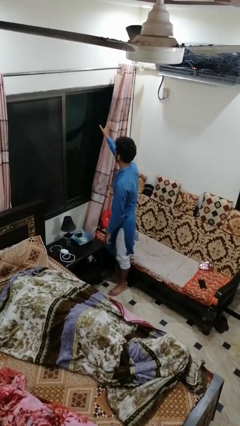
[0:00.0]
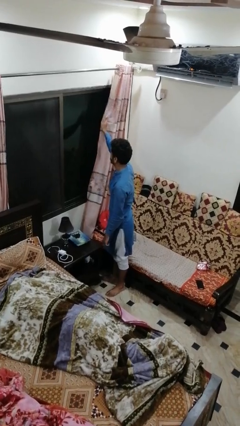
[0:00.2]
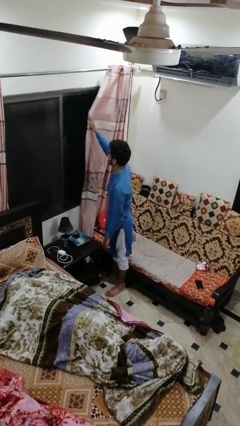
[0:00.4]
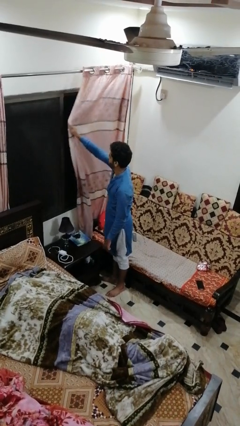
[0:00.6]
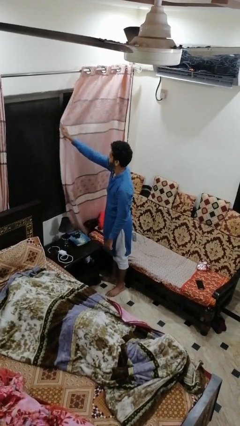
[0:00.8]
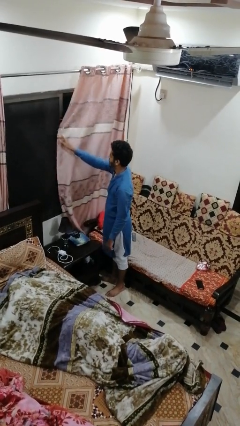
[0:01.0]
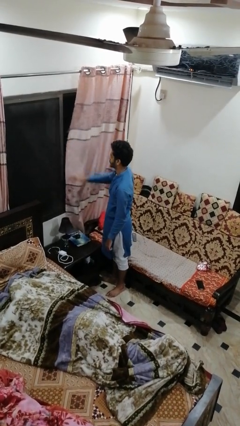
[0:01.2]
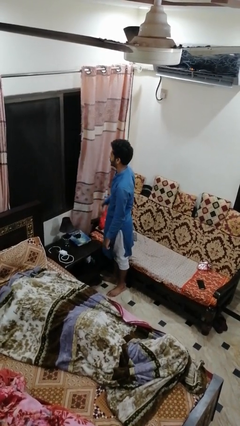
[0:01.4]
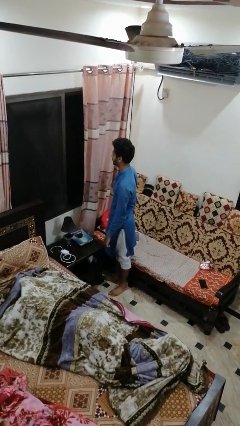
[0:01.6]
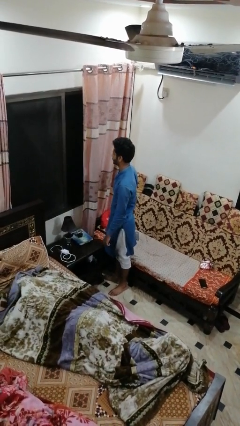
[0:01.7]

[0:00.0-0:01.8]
person closes curtains

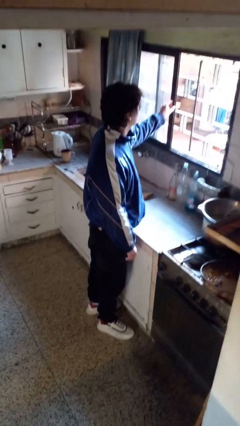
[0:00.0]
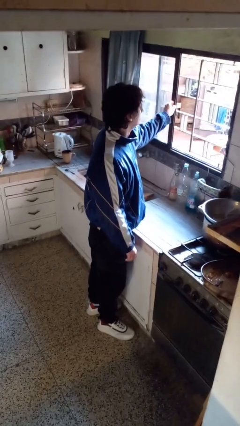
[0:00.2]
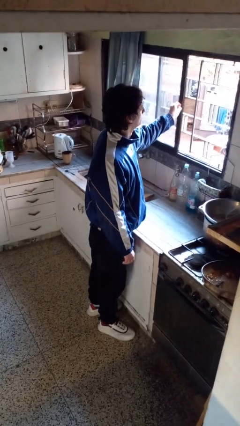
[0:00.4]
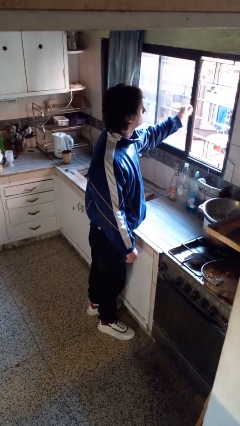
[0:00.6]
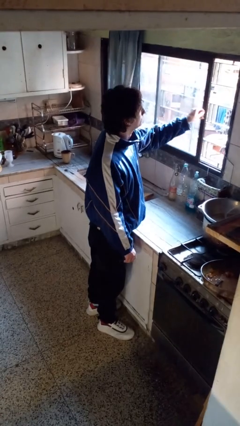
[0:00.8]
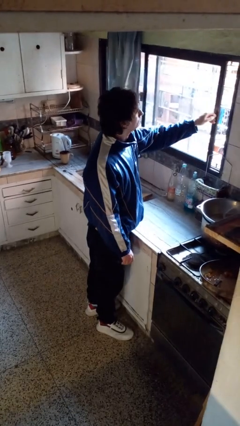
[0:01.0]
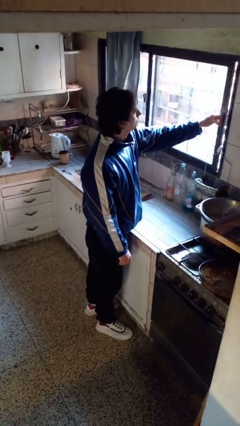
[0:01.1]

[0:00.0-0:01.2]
person closes home window

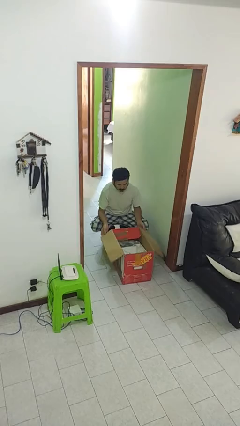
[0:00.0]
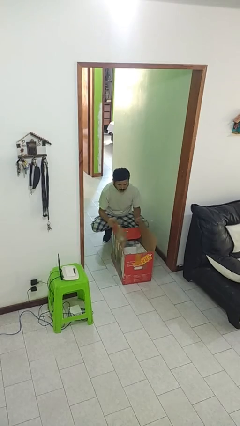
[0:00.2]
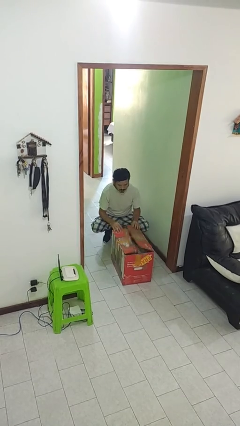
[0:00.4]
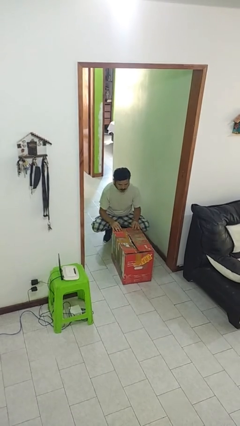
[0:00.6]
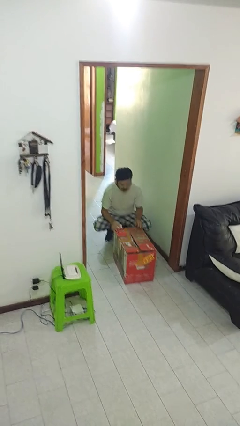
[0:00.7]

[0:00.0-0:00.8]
person closes box

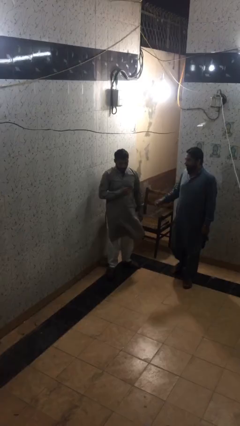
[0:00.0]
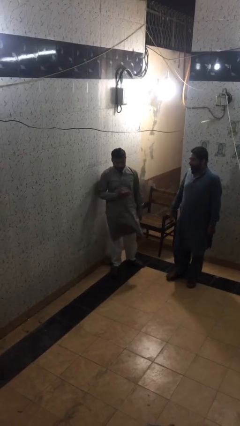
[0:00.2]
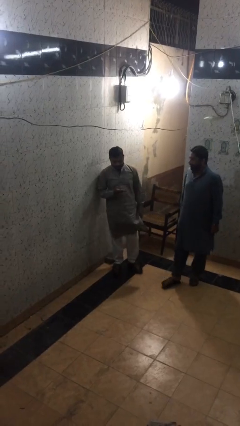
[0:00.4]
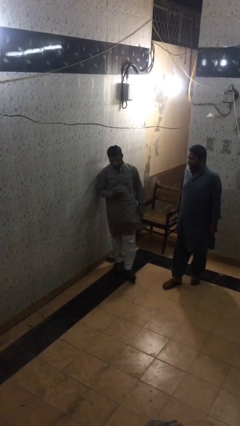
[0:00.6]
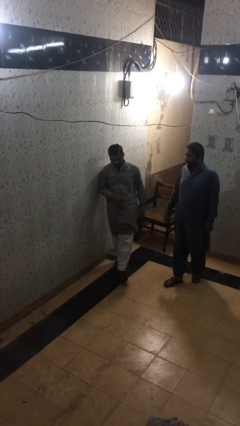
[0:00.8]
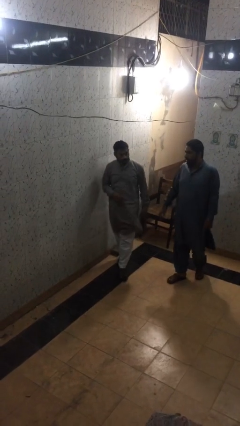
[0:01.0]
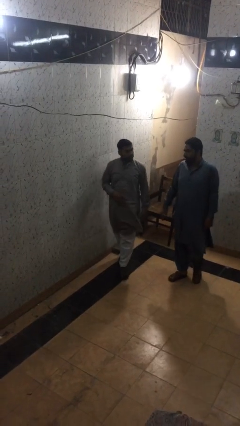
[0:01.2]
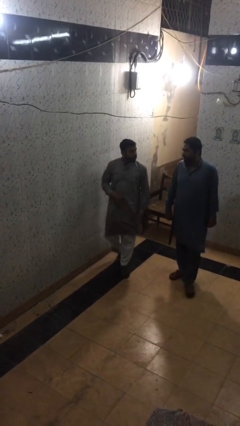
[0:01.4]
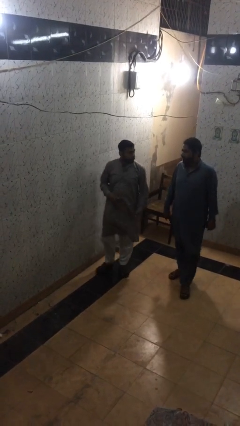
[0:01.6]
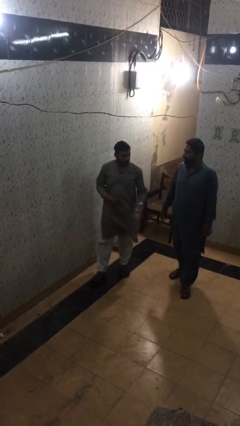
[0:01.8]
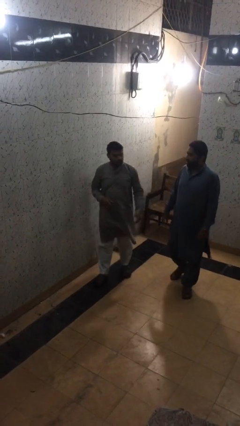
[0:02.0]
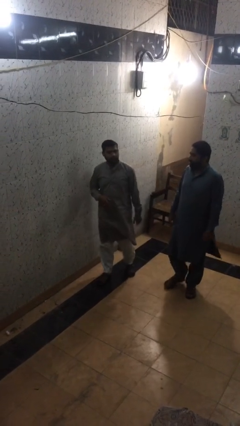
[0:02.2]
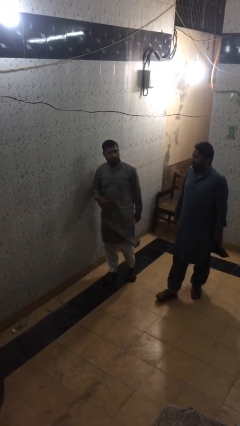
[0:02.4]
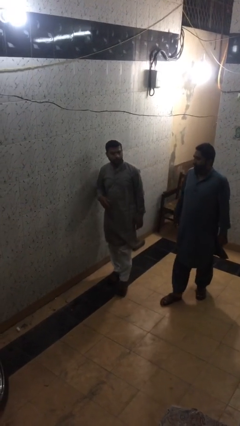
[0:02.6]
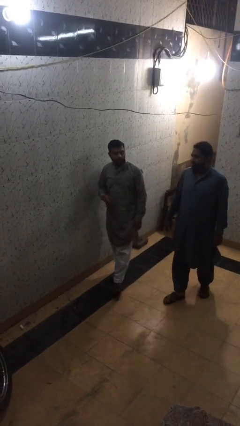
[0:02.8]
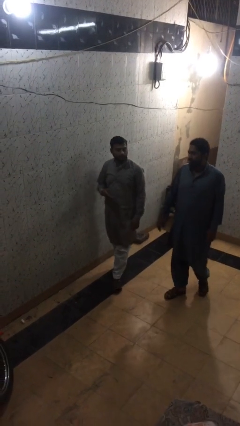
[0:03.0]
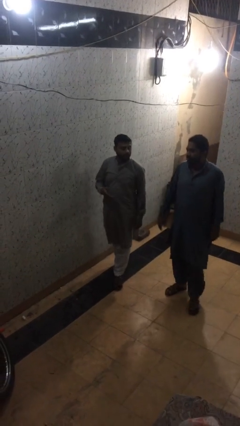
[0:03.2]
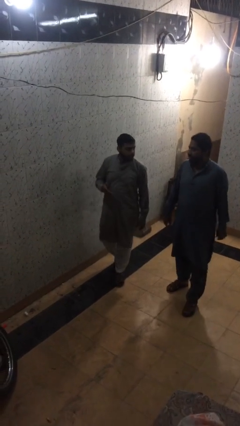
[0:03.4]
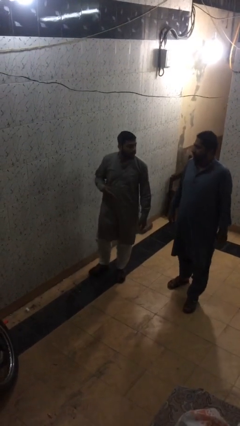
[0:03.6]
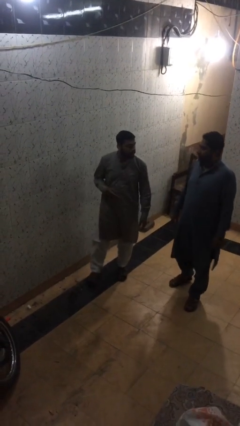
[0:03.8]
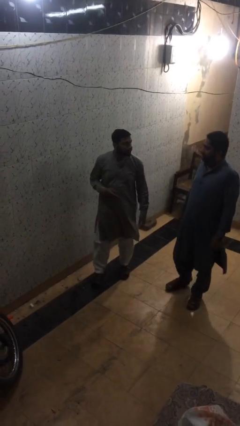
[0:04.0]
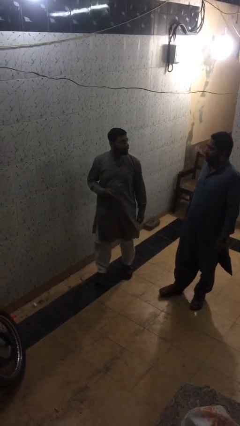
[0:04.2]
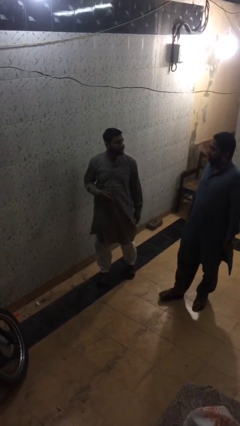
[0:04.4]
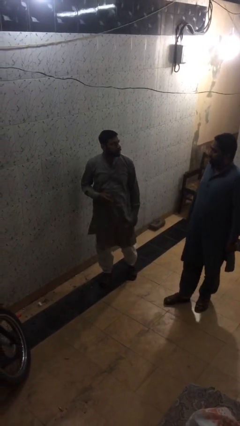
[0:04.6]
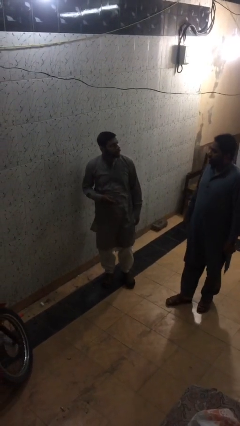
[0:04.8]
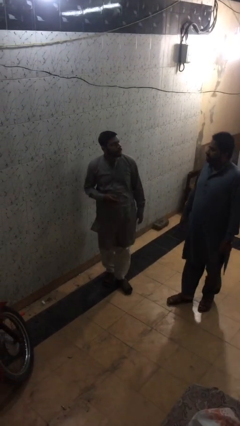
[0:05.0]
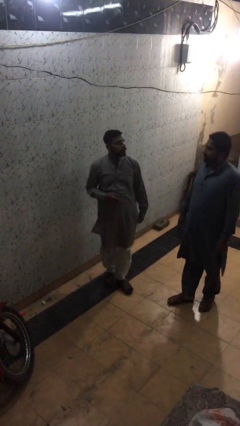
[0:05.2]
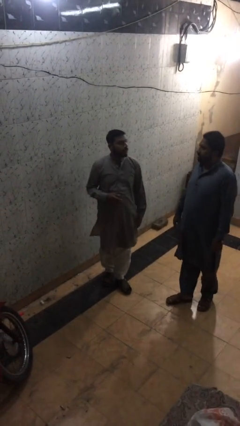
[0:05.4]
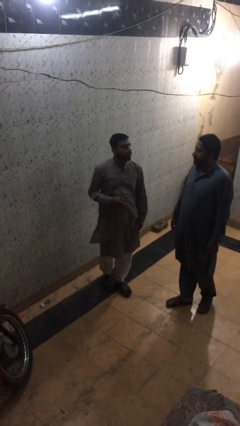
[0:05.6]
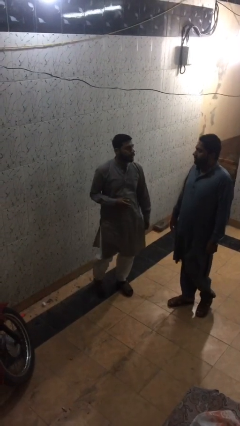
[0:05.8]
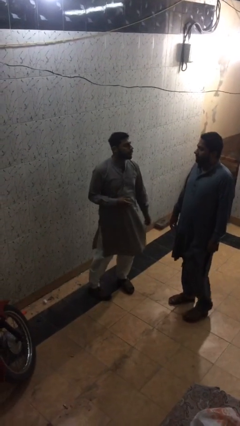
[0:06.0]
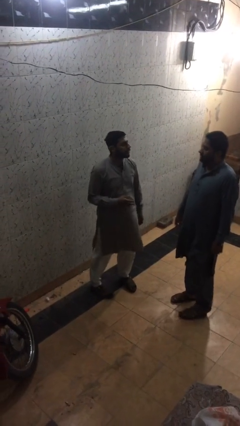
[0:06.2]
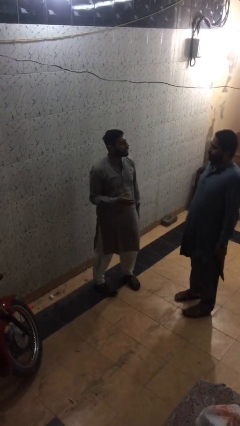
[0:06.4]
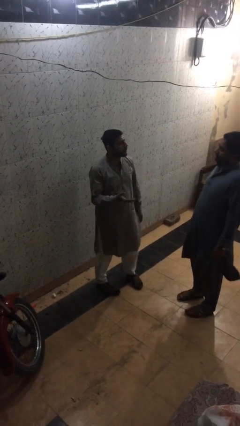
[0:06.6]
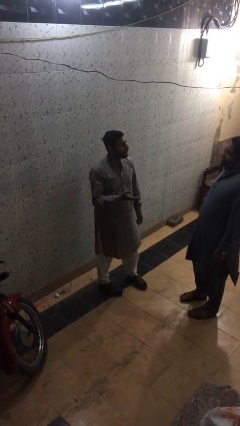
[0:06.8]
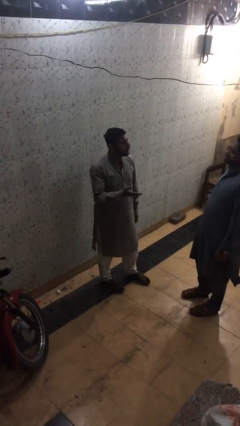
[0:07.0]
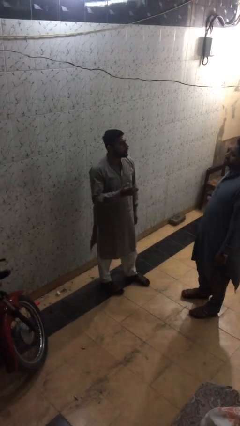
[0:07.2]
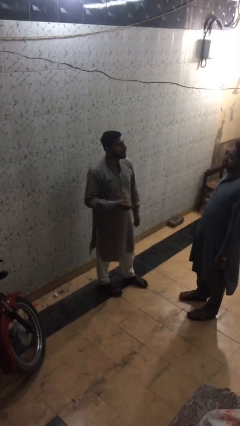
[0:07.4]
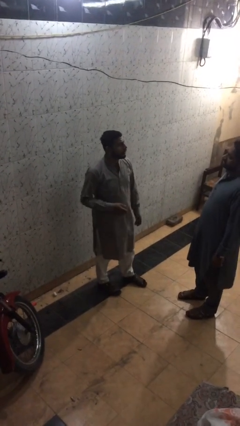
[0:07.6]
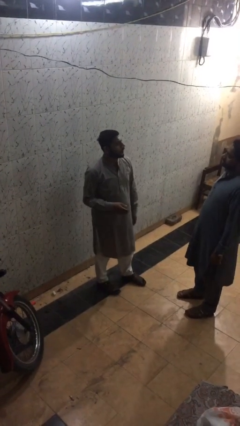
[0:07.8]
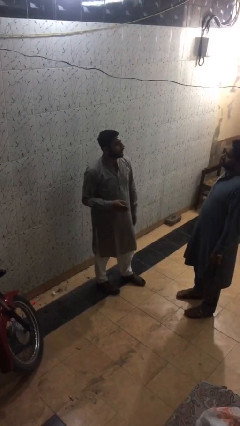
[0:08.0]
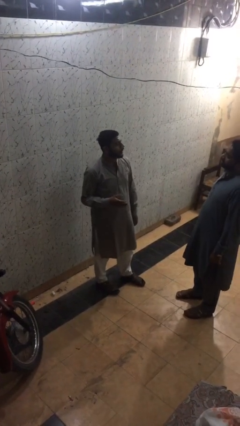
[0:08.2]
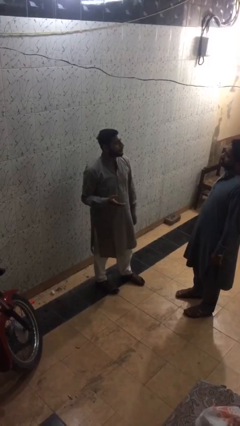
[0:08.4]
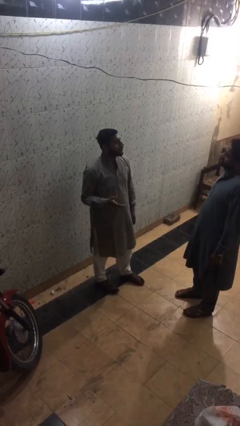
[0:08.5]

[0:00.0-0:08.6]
person talks to person

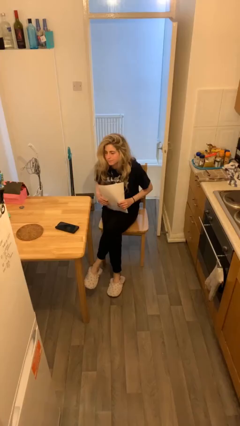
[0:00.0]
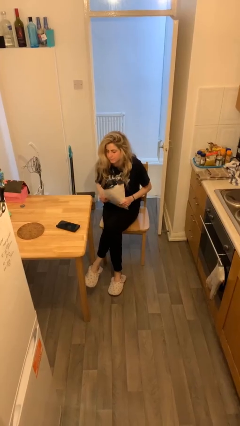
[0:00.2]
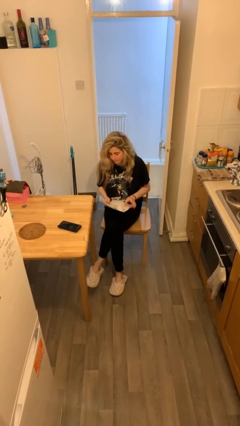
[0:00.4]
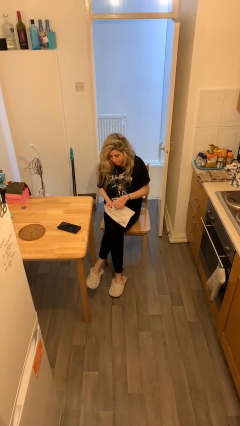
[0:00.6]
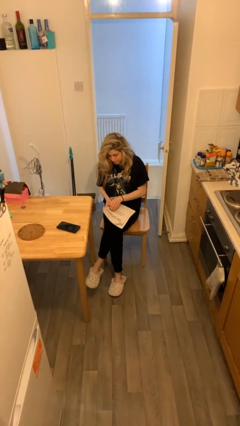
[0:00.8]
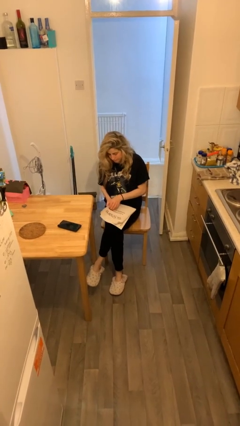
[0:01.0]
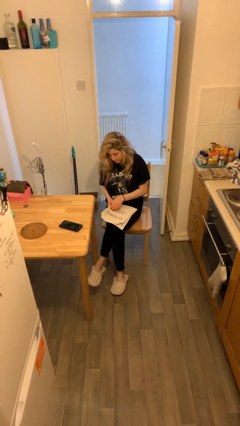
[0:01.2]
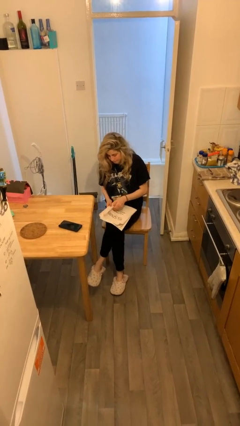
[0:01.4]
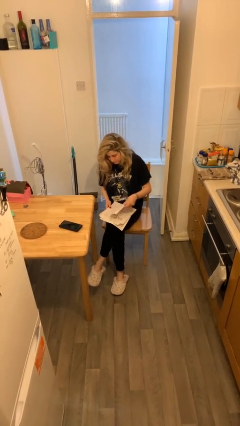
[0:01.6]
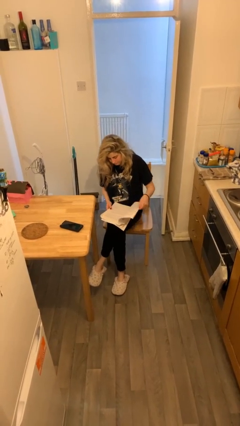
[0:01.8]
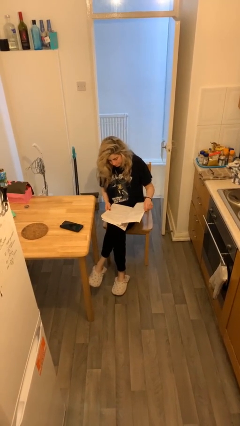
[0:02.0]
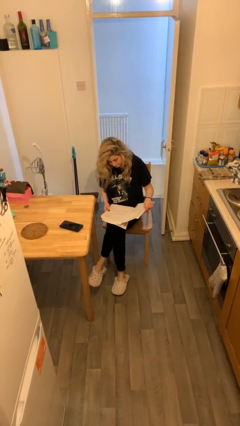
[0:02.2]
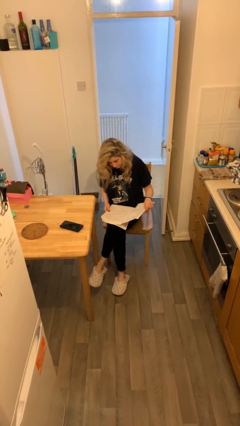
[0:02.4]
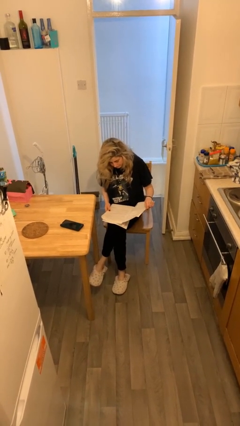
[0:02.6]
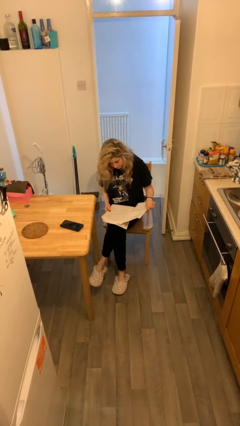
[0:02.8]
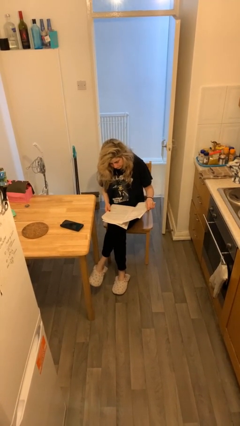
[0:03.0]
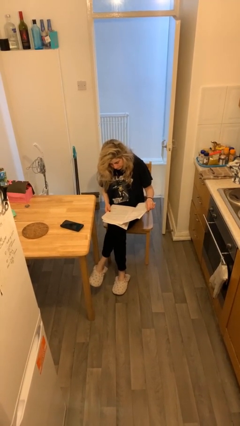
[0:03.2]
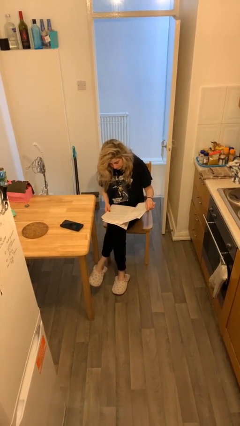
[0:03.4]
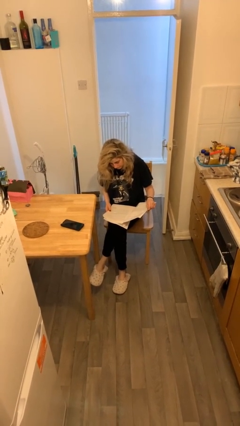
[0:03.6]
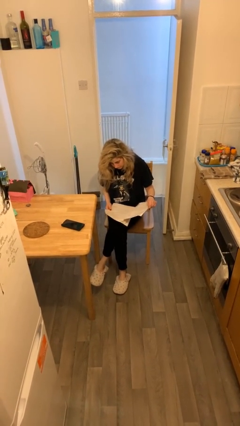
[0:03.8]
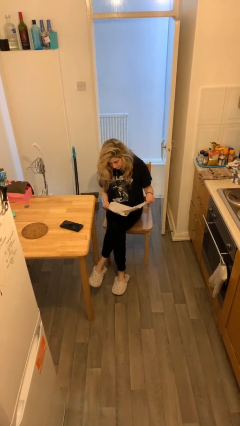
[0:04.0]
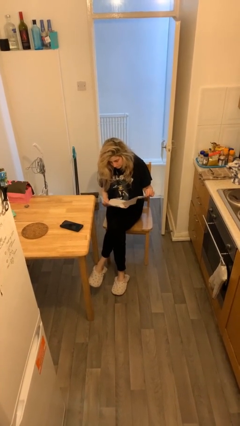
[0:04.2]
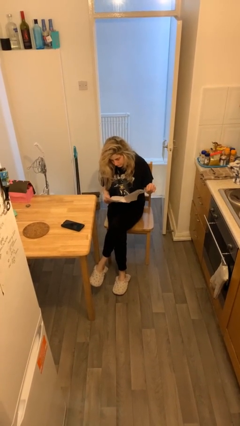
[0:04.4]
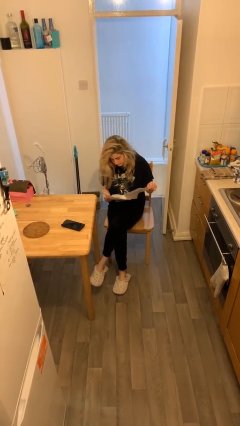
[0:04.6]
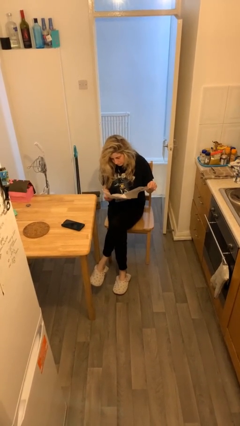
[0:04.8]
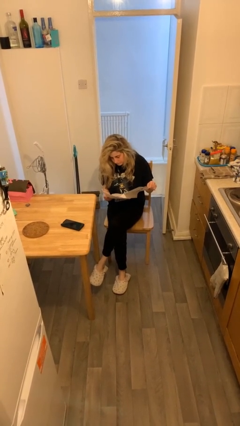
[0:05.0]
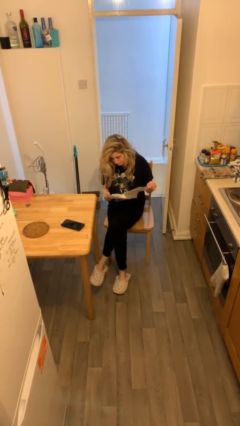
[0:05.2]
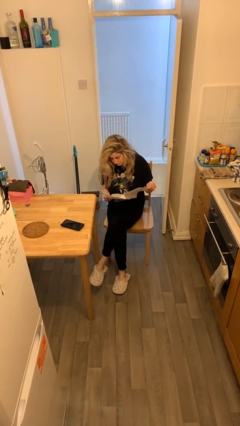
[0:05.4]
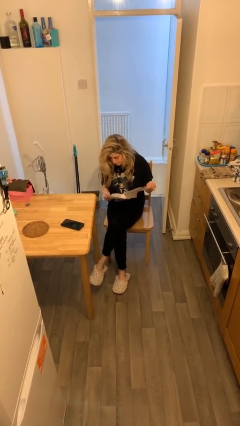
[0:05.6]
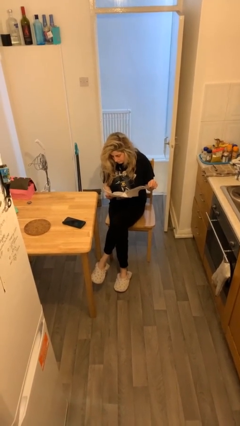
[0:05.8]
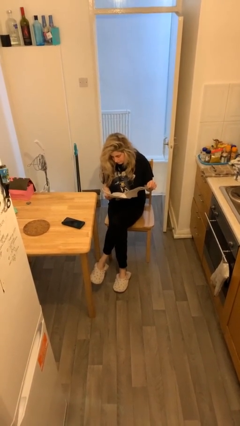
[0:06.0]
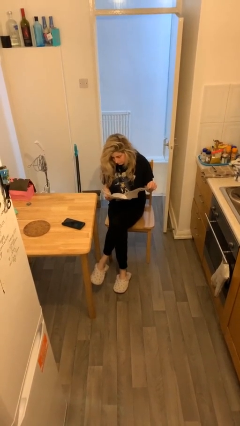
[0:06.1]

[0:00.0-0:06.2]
person reads document
